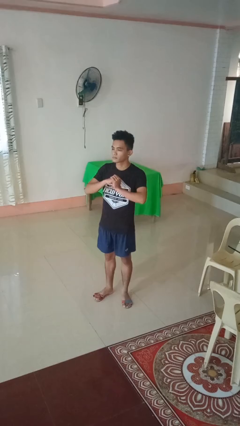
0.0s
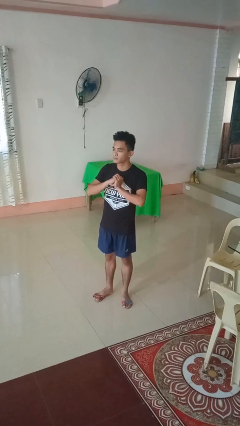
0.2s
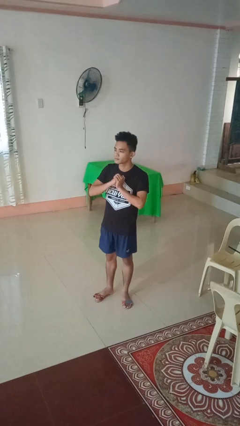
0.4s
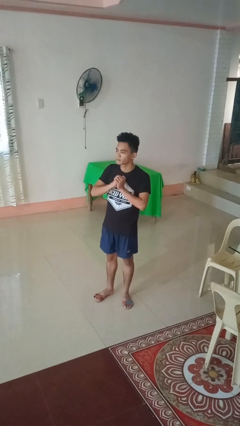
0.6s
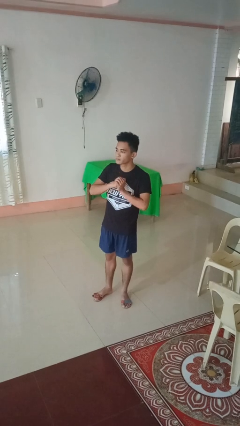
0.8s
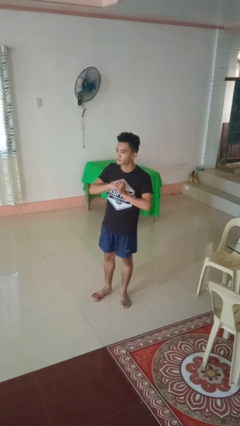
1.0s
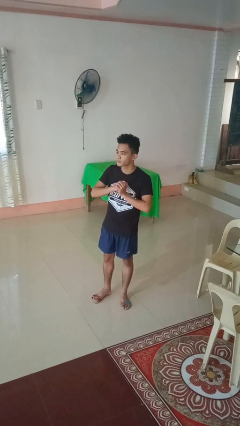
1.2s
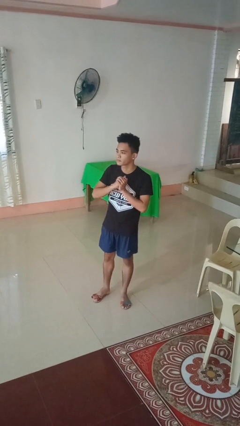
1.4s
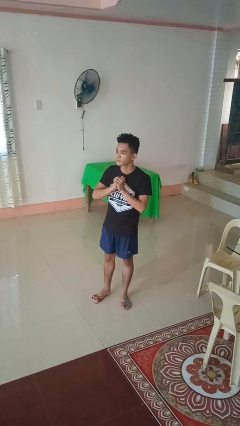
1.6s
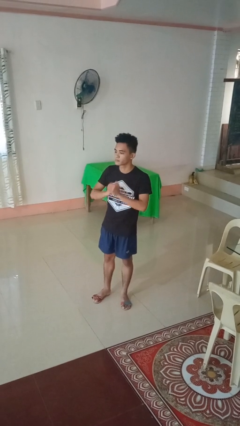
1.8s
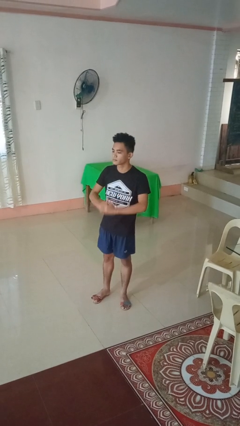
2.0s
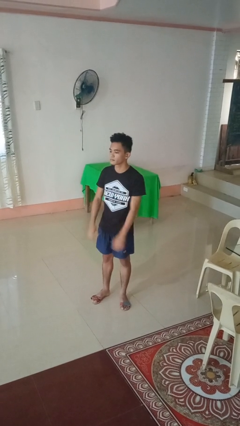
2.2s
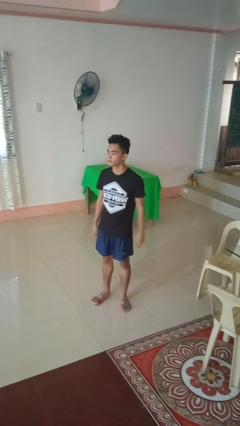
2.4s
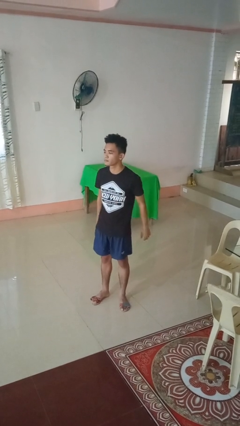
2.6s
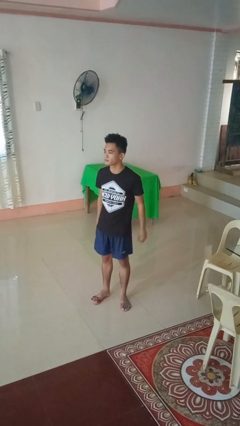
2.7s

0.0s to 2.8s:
person cracks knuckles

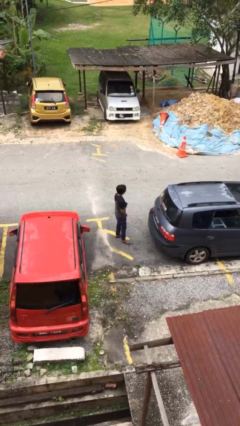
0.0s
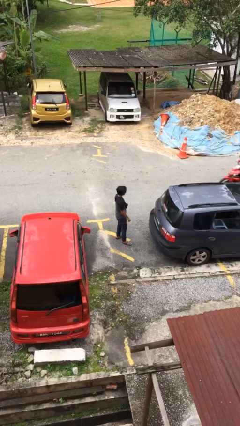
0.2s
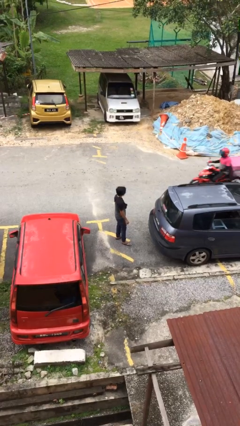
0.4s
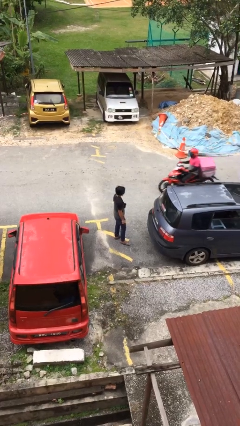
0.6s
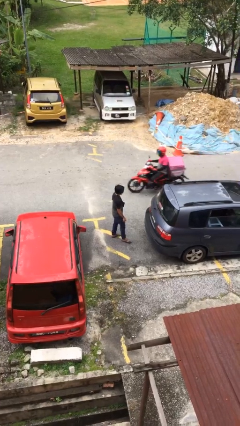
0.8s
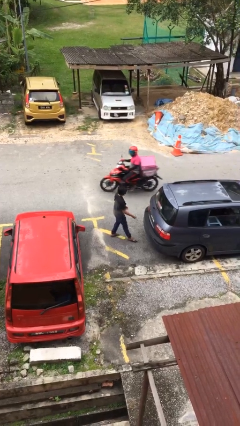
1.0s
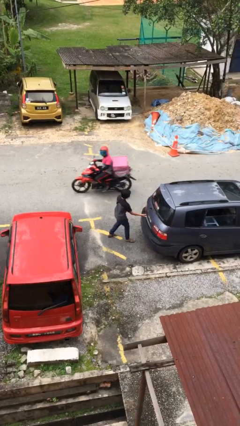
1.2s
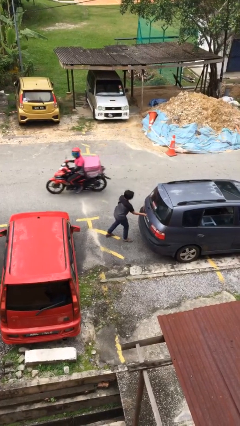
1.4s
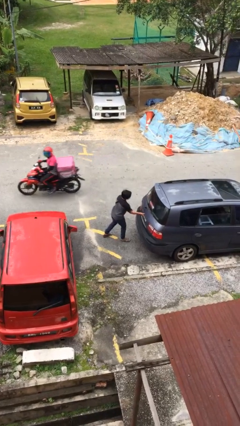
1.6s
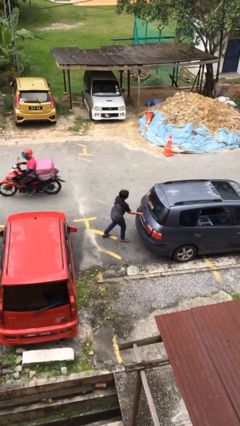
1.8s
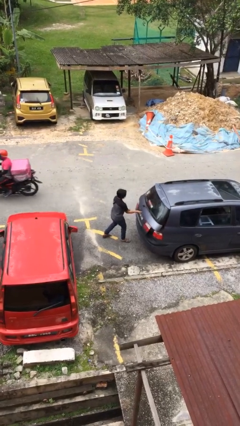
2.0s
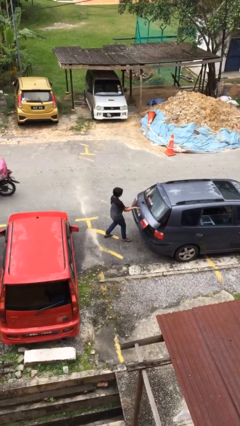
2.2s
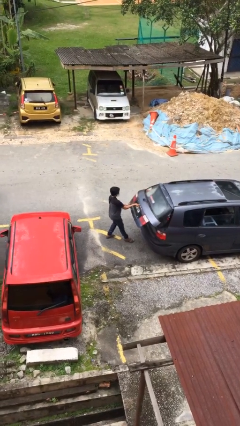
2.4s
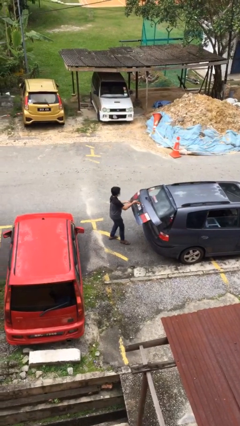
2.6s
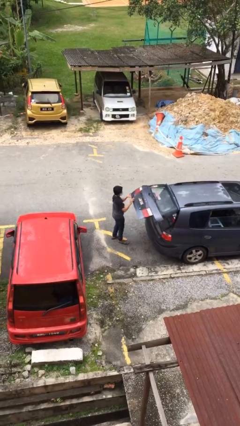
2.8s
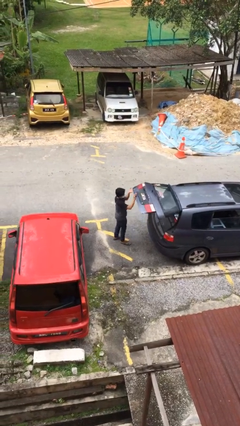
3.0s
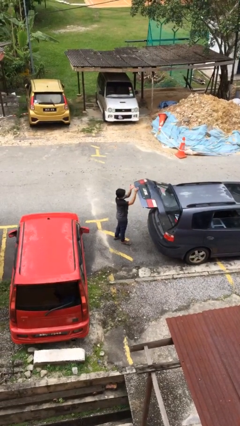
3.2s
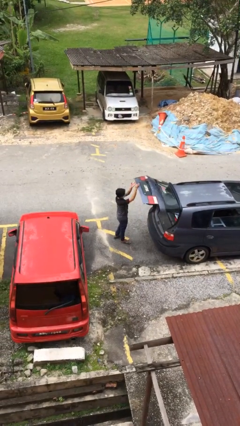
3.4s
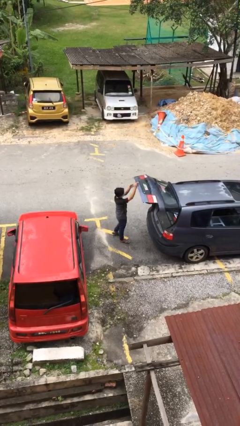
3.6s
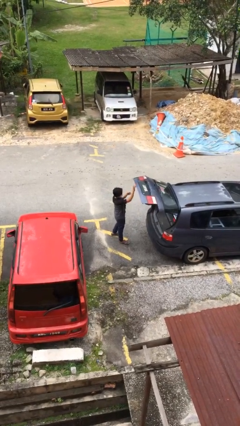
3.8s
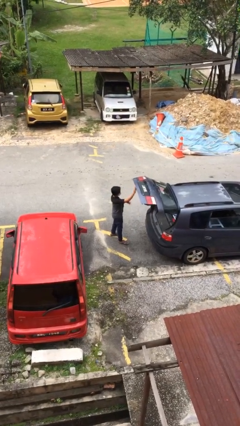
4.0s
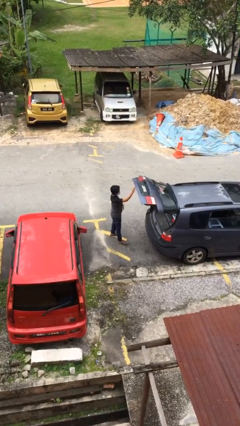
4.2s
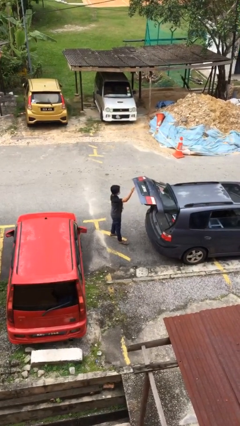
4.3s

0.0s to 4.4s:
person opens car trunk

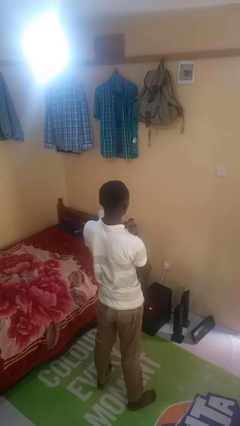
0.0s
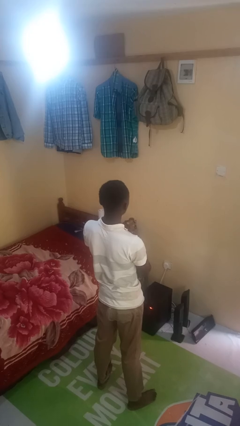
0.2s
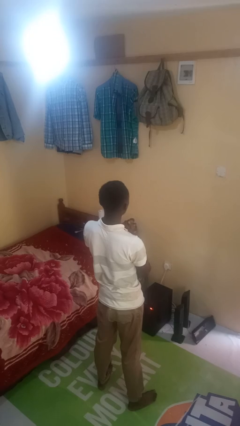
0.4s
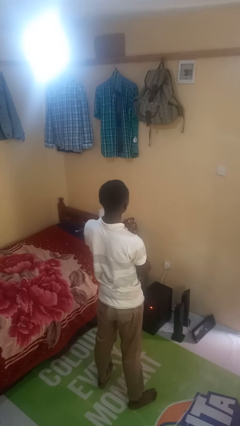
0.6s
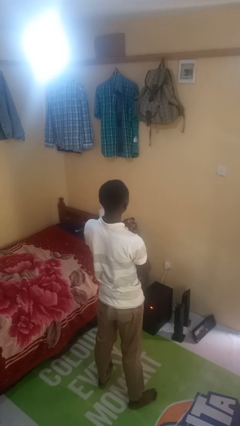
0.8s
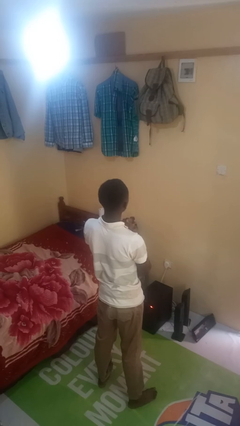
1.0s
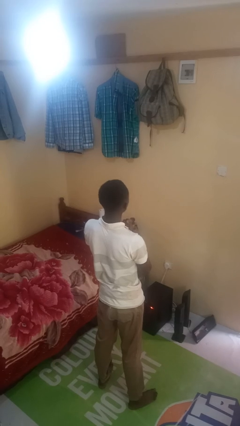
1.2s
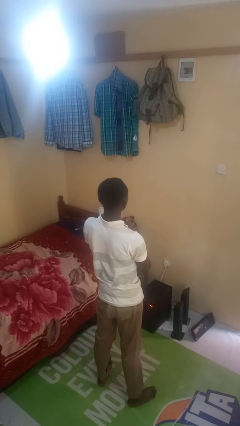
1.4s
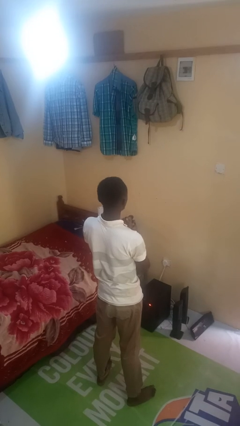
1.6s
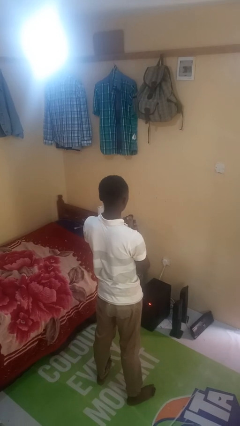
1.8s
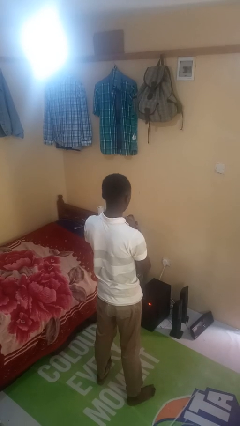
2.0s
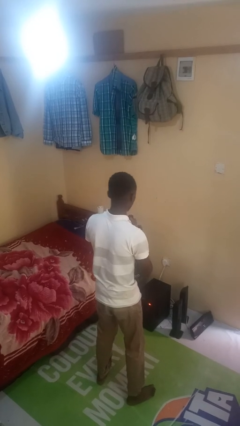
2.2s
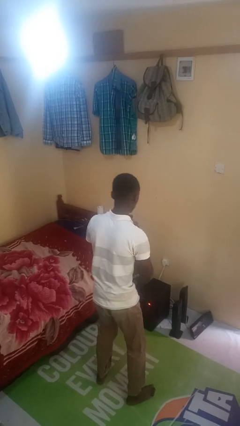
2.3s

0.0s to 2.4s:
person stands up

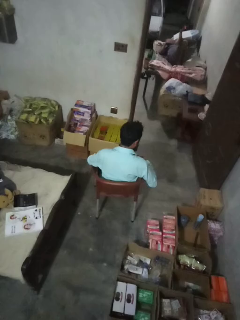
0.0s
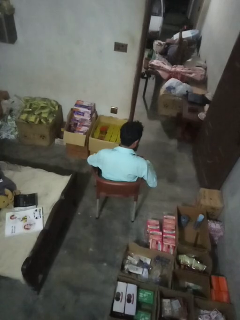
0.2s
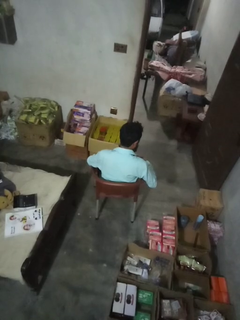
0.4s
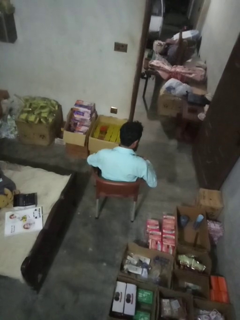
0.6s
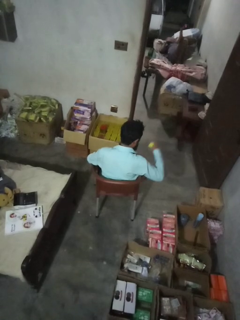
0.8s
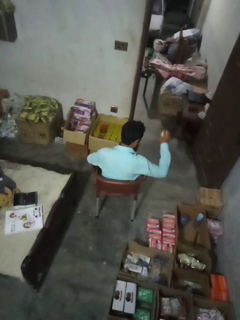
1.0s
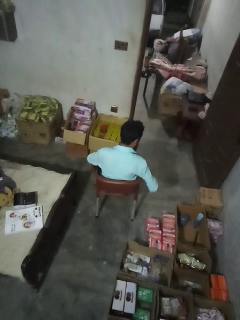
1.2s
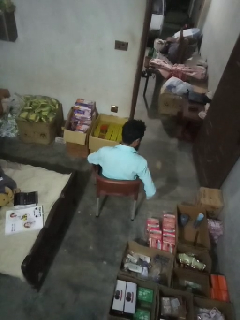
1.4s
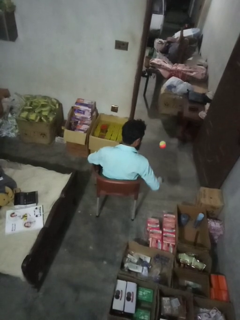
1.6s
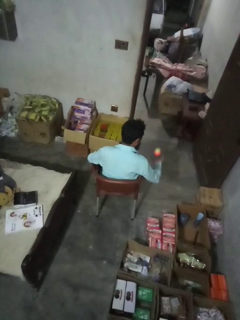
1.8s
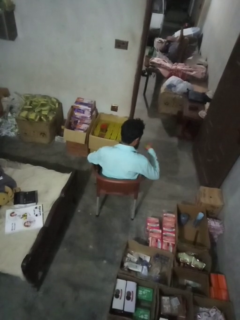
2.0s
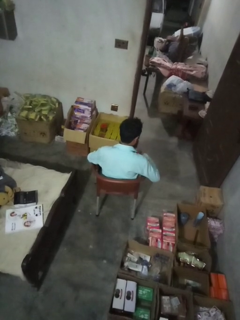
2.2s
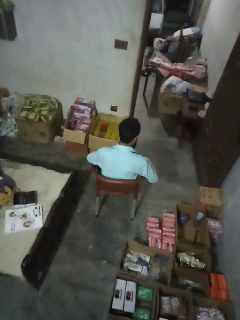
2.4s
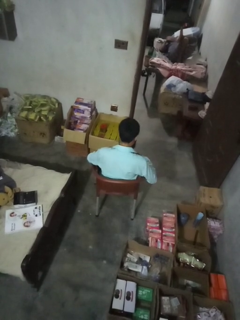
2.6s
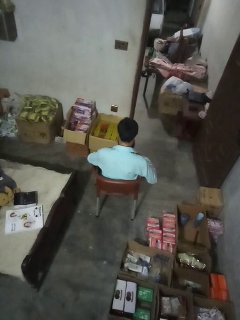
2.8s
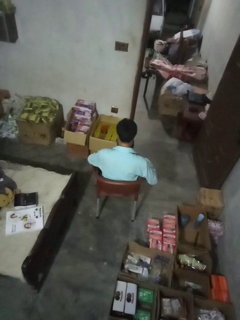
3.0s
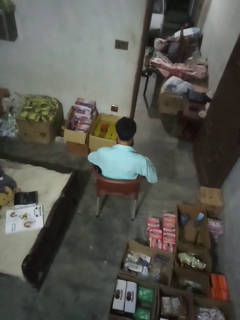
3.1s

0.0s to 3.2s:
person bounces ball on floor

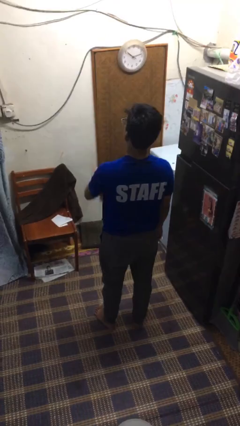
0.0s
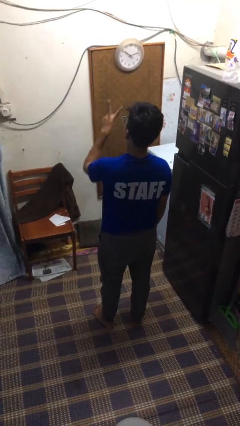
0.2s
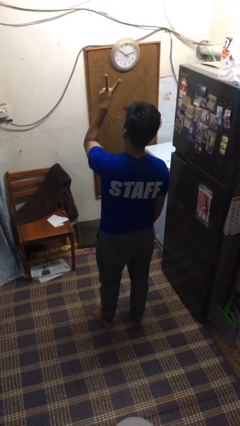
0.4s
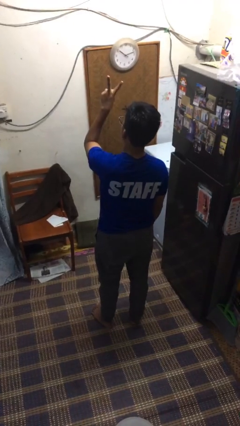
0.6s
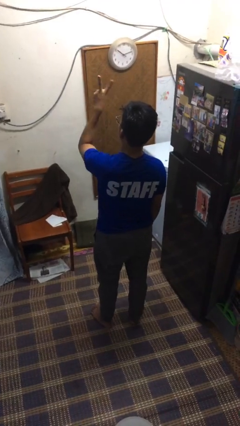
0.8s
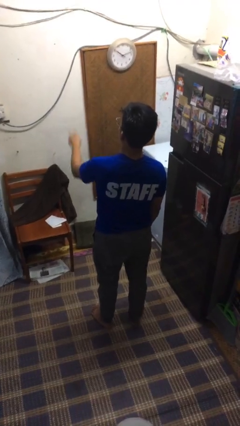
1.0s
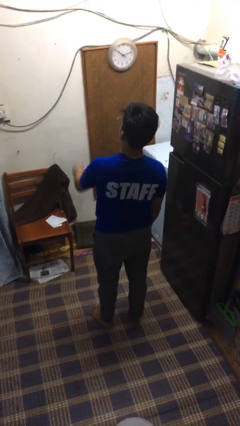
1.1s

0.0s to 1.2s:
person gestures peace

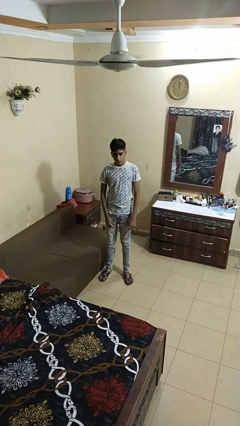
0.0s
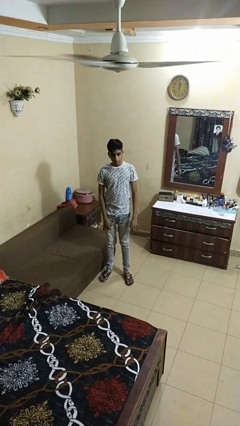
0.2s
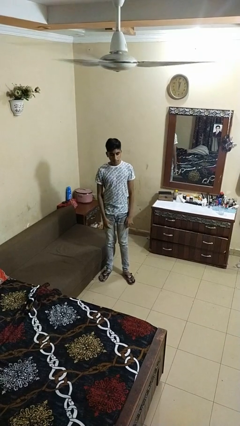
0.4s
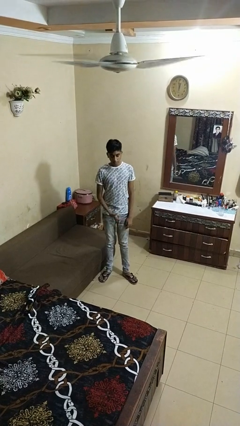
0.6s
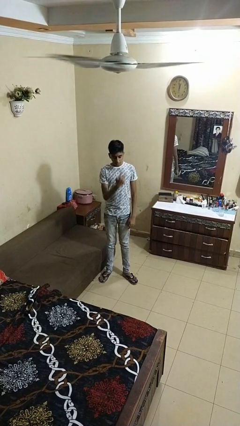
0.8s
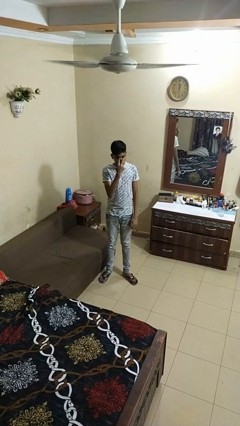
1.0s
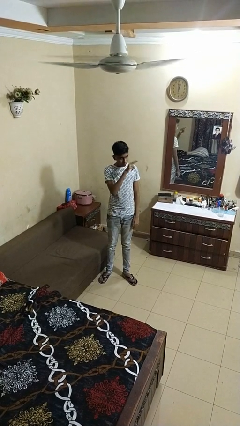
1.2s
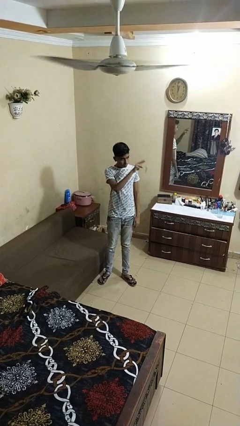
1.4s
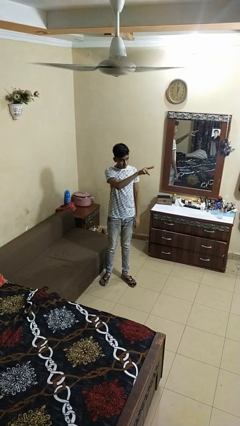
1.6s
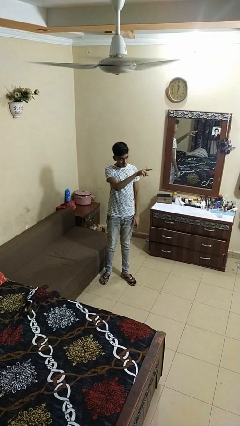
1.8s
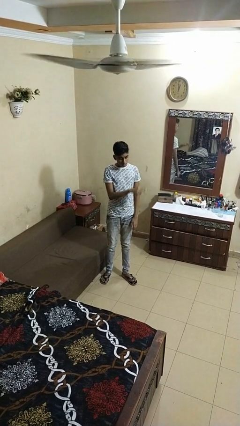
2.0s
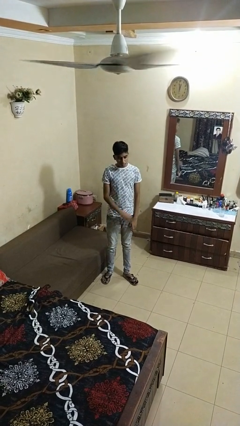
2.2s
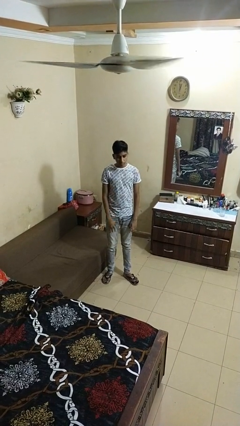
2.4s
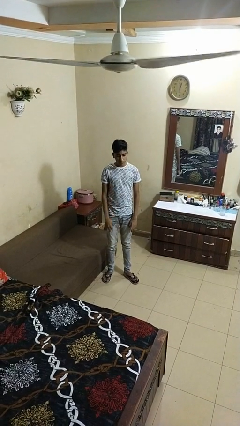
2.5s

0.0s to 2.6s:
person gestures watch closely

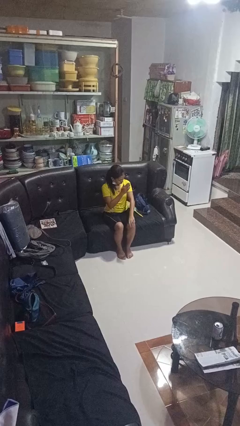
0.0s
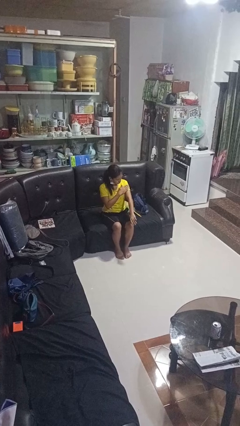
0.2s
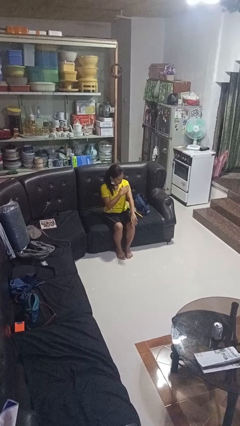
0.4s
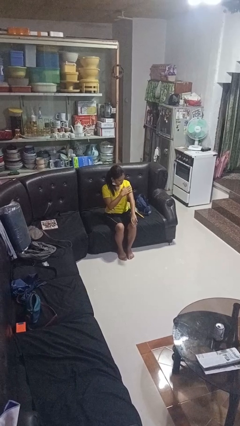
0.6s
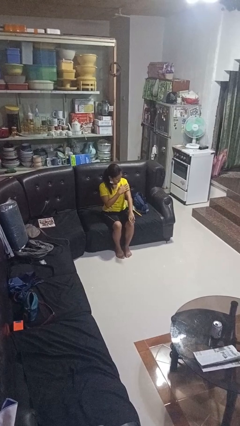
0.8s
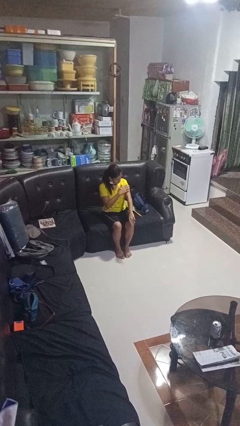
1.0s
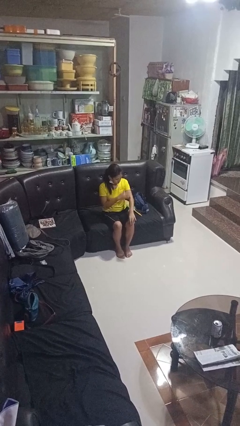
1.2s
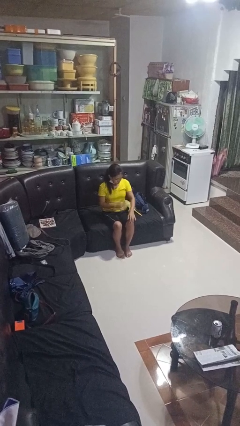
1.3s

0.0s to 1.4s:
person swats bug

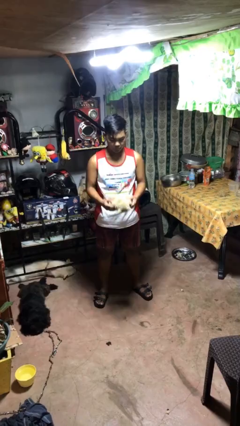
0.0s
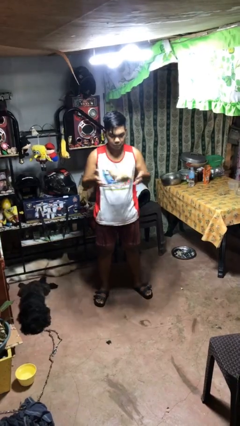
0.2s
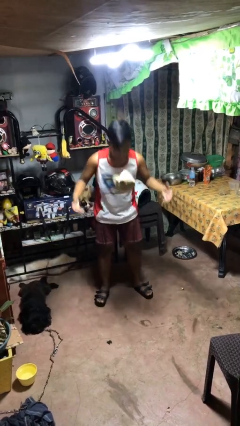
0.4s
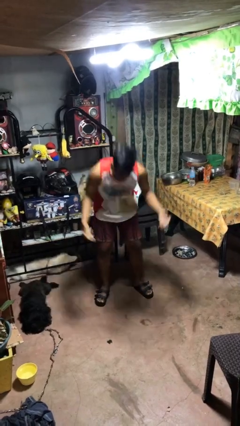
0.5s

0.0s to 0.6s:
person drops object
